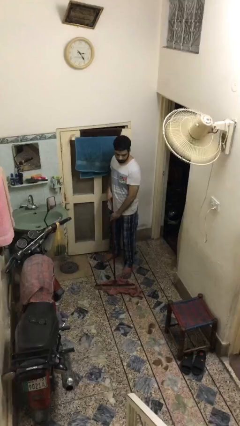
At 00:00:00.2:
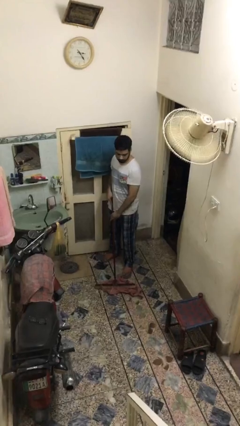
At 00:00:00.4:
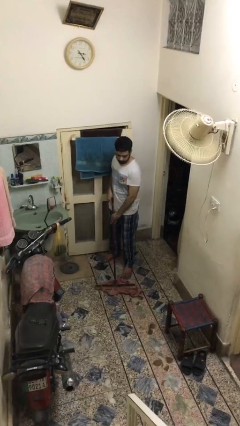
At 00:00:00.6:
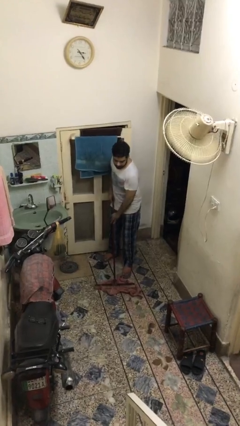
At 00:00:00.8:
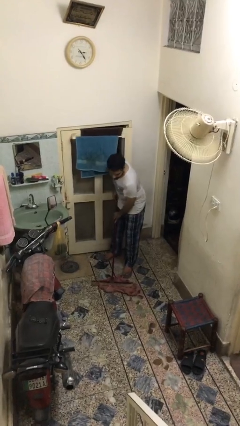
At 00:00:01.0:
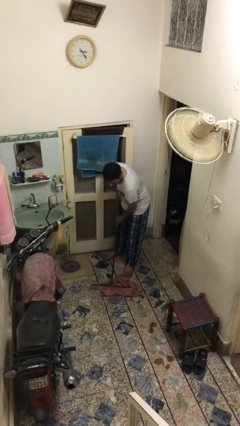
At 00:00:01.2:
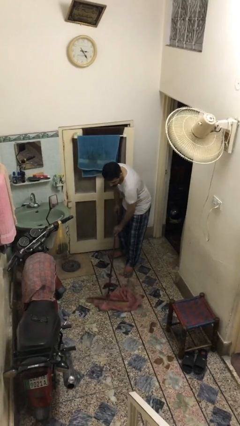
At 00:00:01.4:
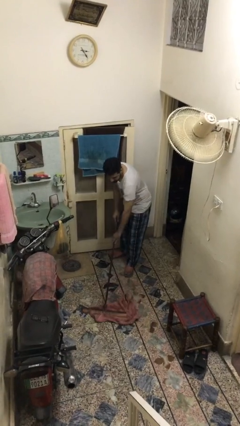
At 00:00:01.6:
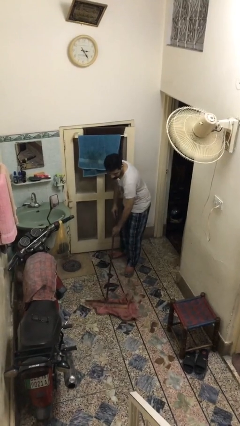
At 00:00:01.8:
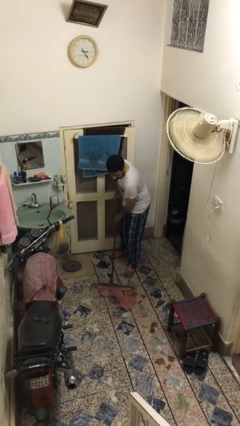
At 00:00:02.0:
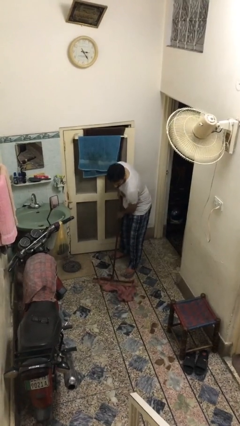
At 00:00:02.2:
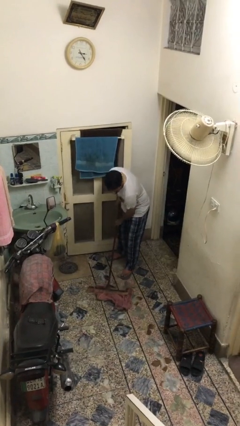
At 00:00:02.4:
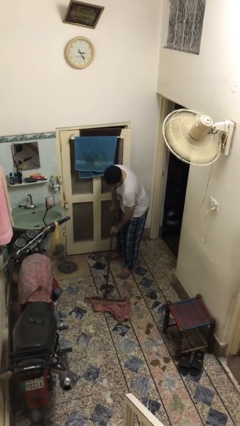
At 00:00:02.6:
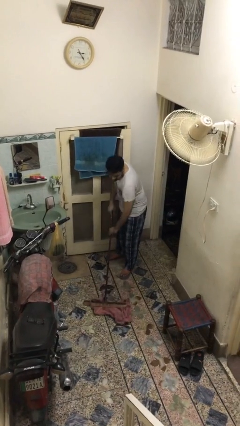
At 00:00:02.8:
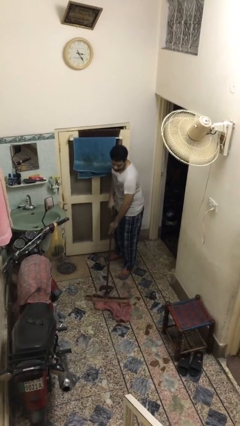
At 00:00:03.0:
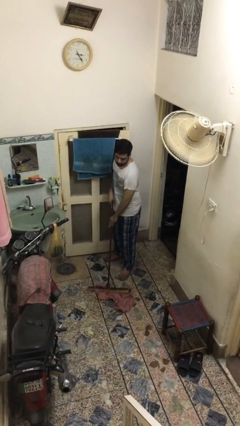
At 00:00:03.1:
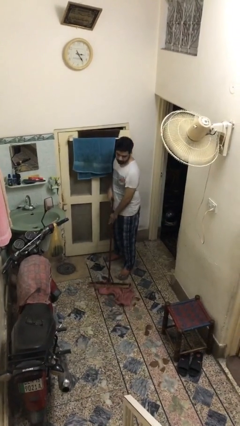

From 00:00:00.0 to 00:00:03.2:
person mops

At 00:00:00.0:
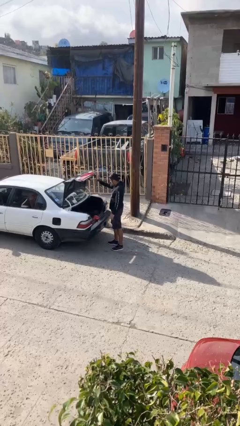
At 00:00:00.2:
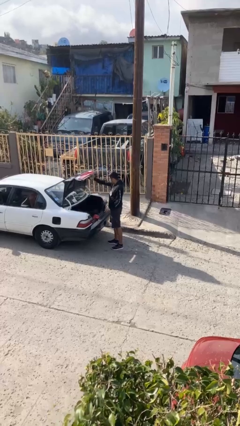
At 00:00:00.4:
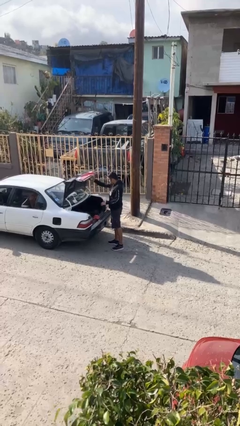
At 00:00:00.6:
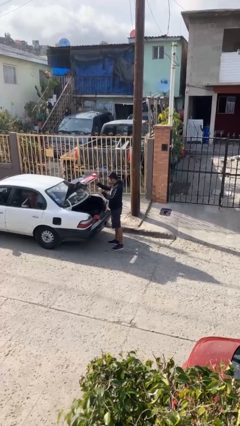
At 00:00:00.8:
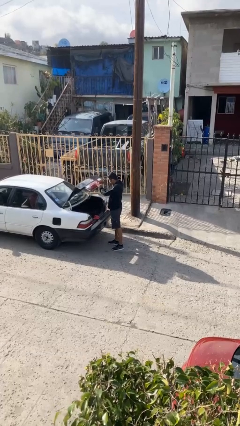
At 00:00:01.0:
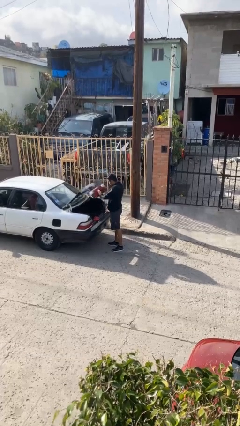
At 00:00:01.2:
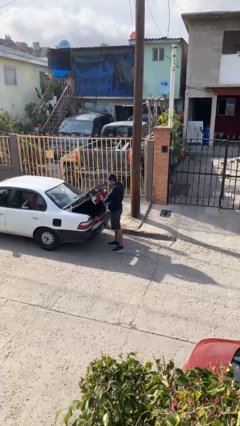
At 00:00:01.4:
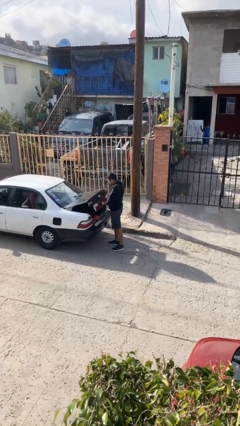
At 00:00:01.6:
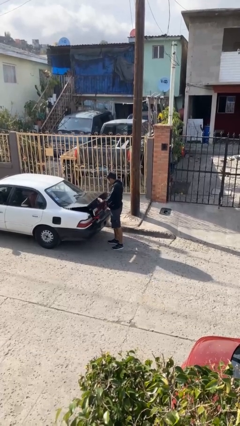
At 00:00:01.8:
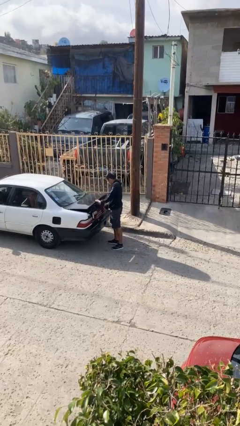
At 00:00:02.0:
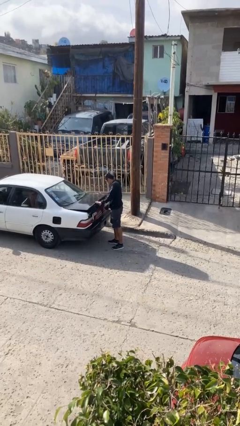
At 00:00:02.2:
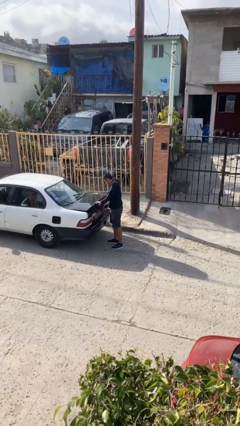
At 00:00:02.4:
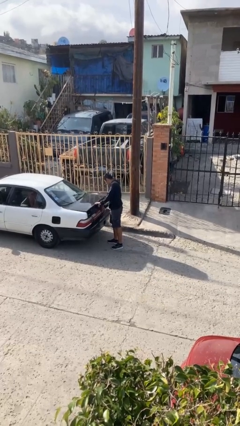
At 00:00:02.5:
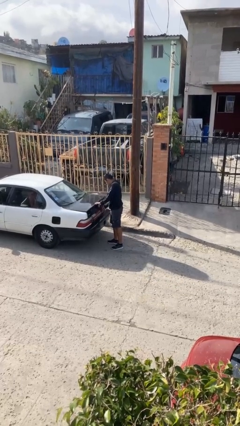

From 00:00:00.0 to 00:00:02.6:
person closes car trunk

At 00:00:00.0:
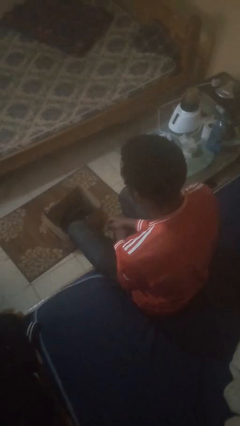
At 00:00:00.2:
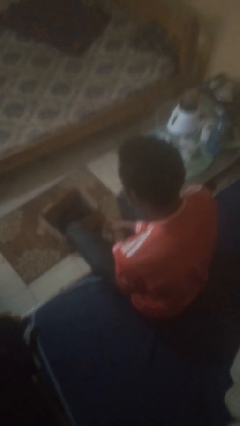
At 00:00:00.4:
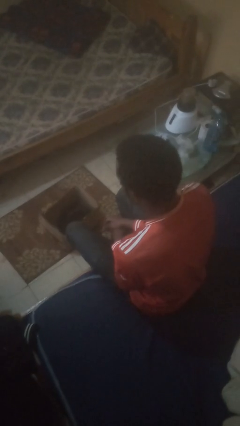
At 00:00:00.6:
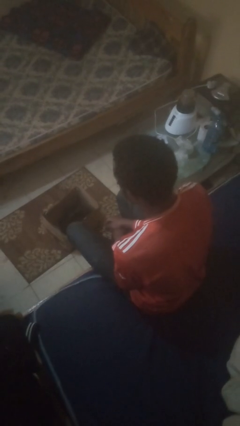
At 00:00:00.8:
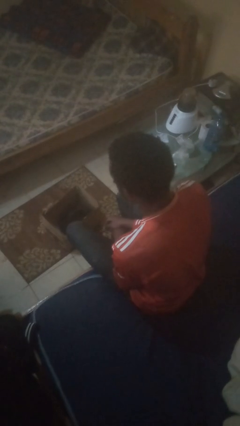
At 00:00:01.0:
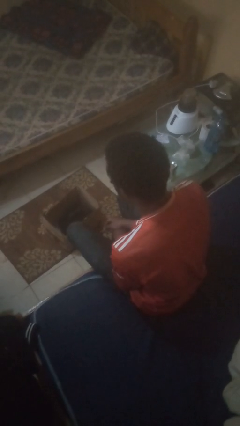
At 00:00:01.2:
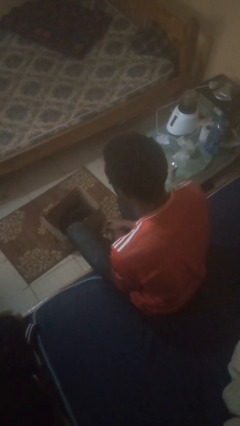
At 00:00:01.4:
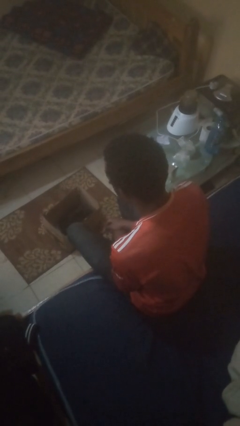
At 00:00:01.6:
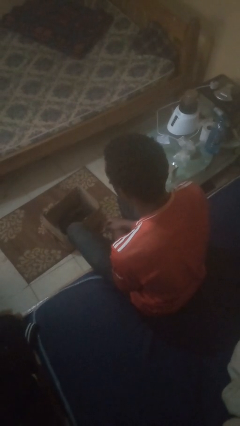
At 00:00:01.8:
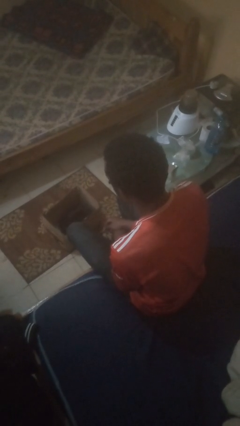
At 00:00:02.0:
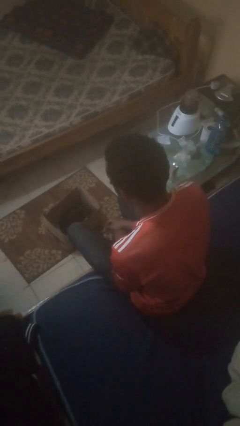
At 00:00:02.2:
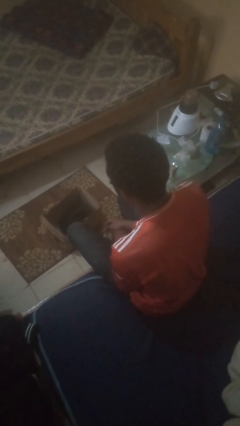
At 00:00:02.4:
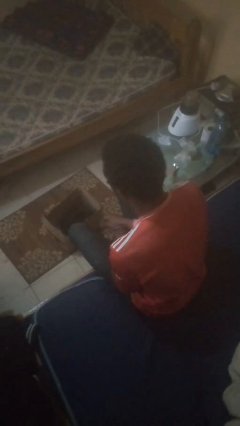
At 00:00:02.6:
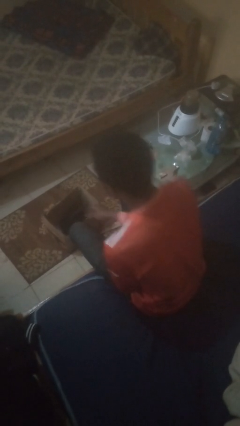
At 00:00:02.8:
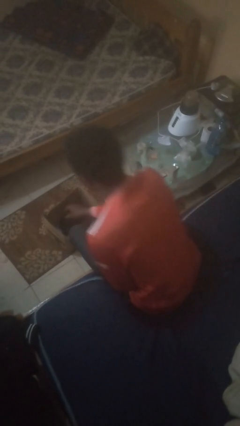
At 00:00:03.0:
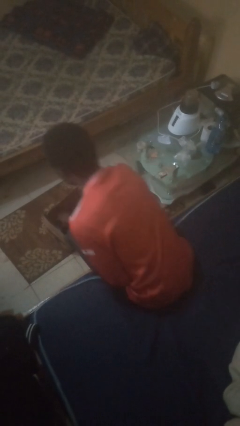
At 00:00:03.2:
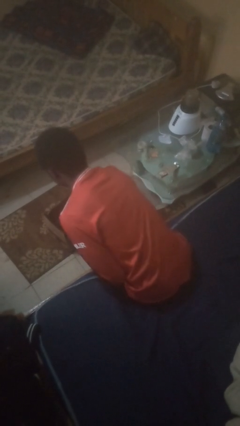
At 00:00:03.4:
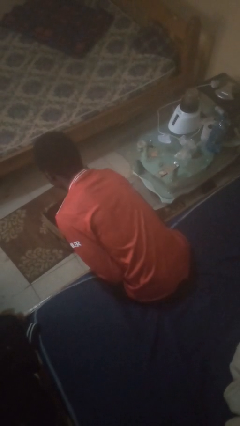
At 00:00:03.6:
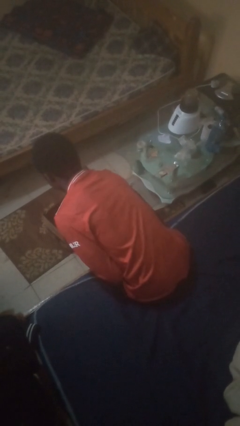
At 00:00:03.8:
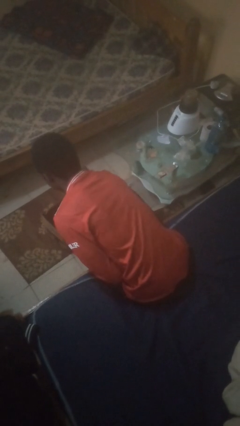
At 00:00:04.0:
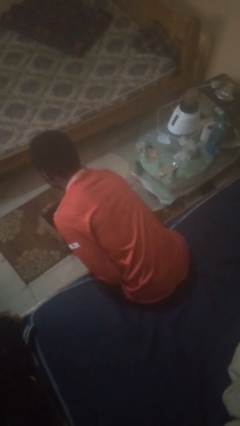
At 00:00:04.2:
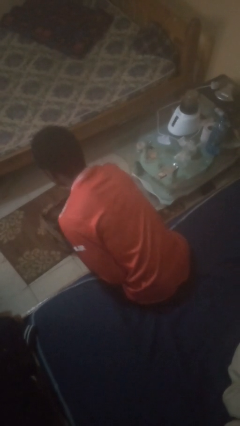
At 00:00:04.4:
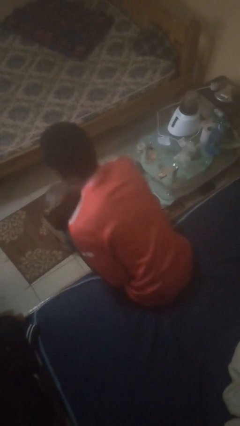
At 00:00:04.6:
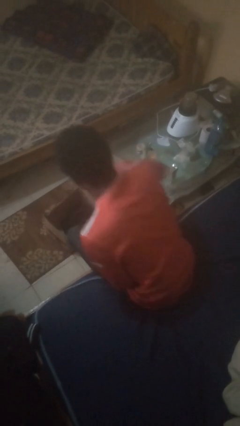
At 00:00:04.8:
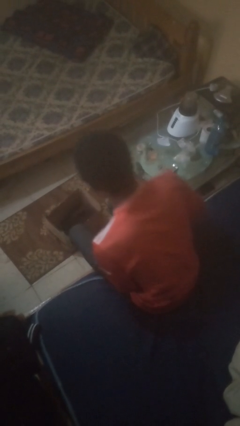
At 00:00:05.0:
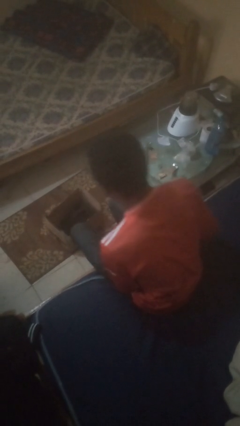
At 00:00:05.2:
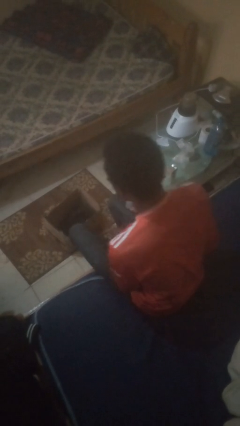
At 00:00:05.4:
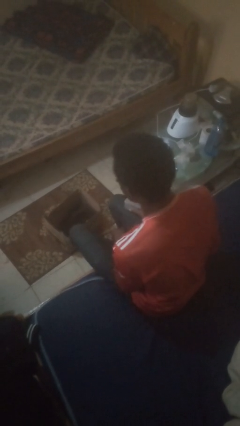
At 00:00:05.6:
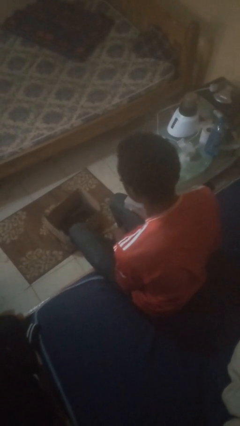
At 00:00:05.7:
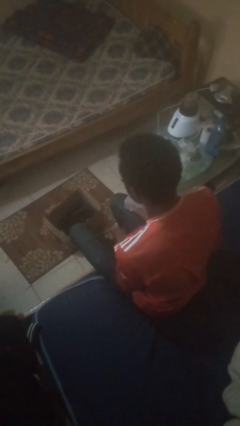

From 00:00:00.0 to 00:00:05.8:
person takes object from box

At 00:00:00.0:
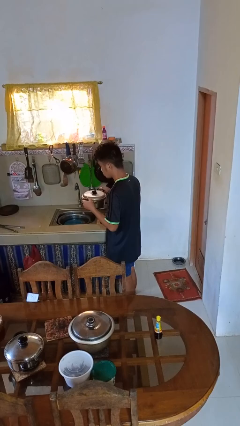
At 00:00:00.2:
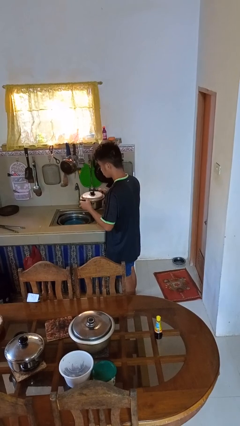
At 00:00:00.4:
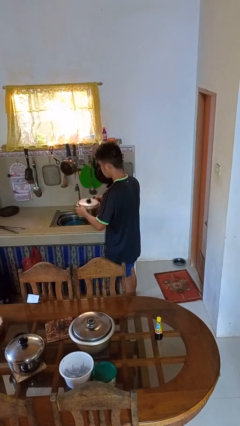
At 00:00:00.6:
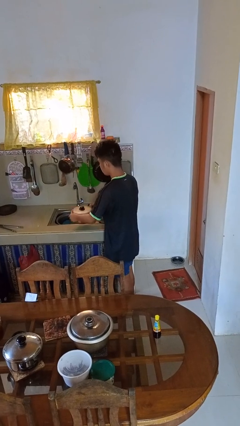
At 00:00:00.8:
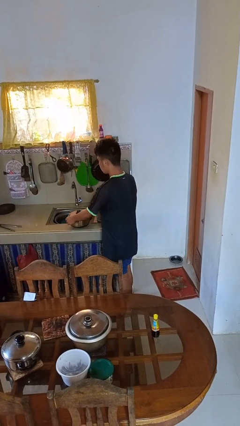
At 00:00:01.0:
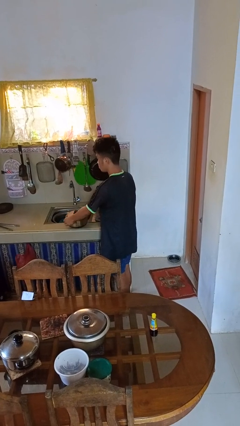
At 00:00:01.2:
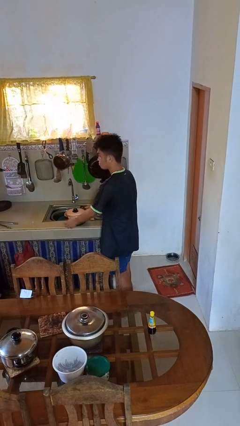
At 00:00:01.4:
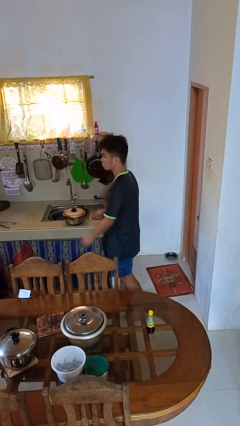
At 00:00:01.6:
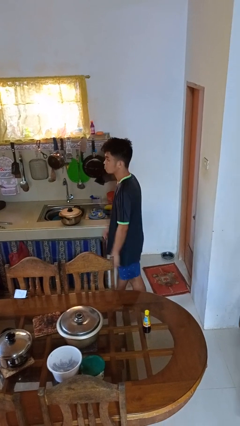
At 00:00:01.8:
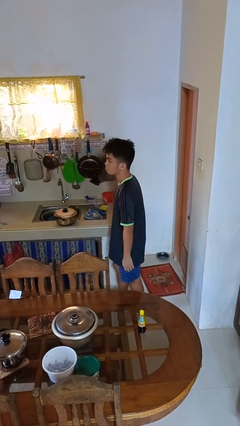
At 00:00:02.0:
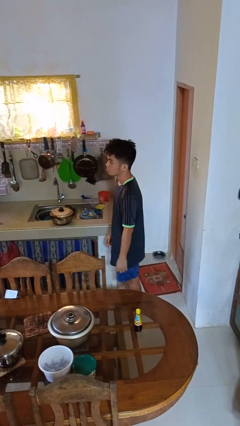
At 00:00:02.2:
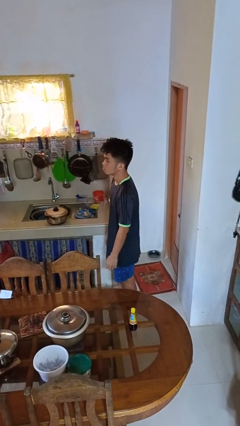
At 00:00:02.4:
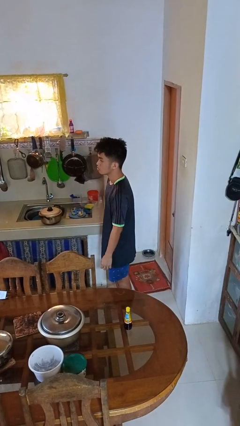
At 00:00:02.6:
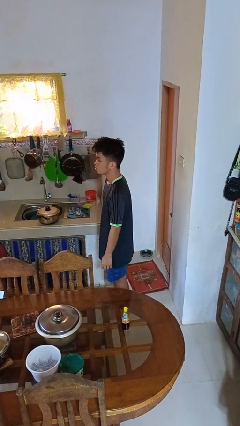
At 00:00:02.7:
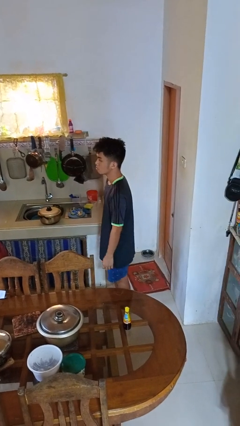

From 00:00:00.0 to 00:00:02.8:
person puts down object on countertop

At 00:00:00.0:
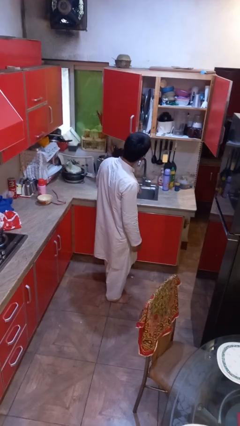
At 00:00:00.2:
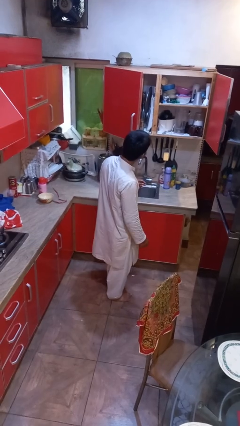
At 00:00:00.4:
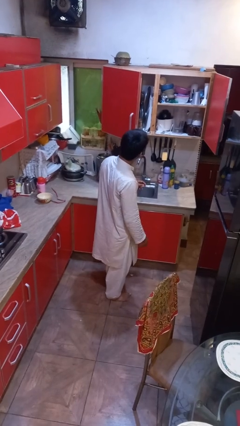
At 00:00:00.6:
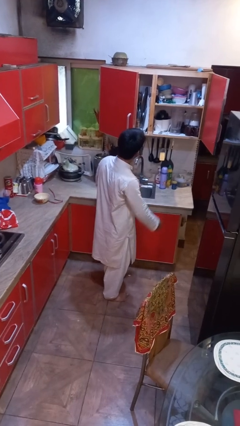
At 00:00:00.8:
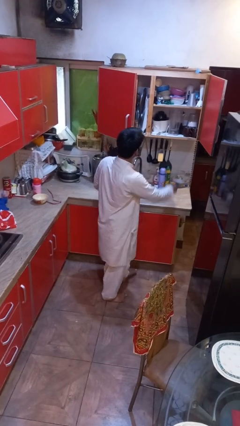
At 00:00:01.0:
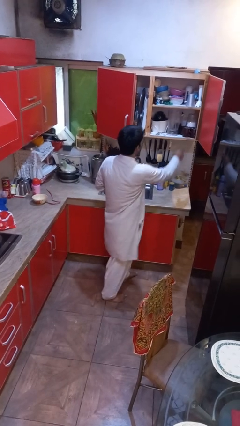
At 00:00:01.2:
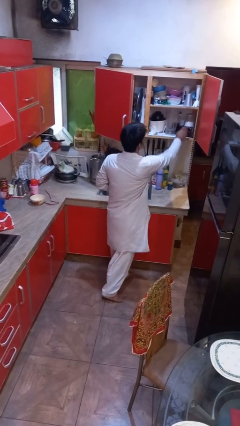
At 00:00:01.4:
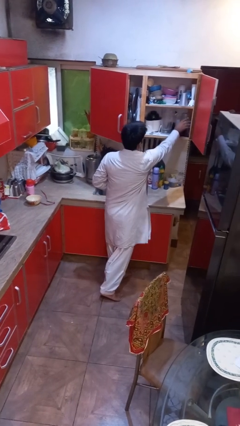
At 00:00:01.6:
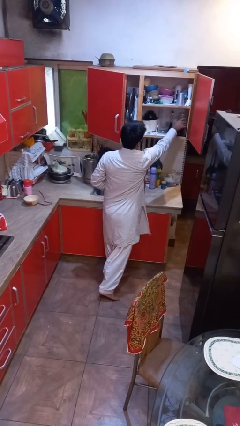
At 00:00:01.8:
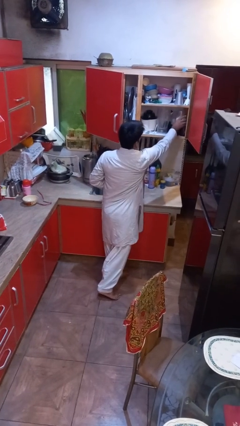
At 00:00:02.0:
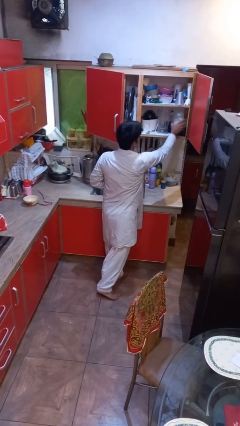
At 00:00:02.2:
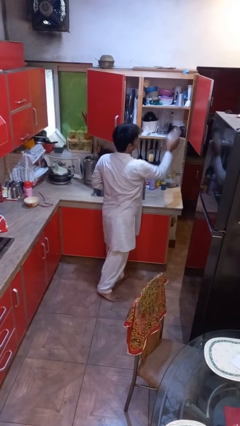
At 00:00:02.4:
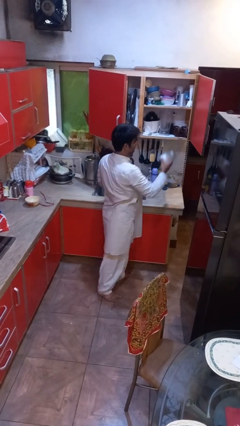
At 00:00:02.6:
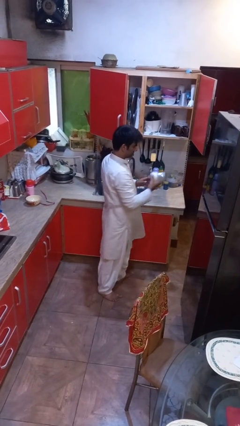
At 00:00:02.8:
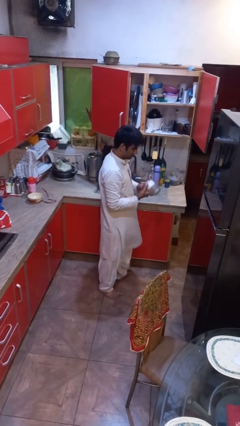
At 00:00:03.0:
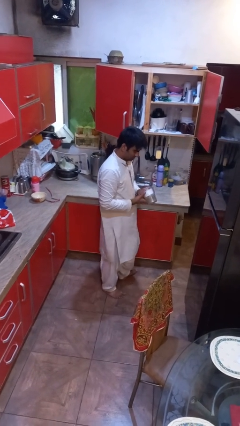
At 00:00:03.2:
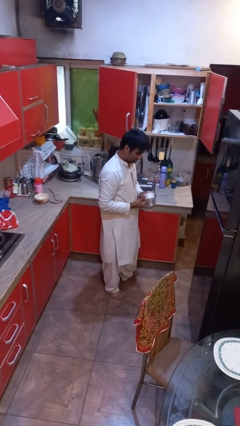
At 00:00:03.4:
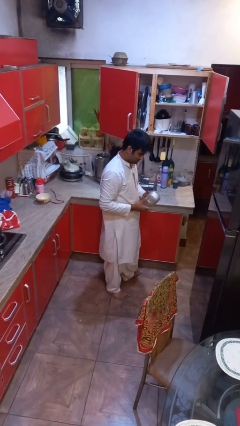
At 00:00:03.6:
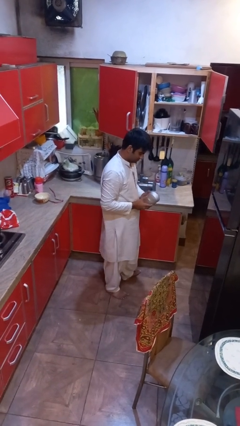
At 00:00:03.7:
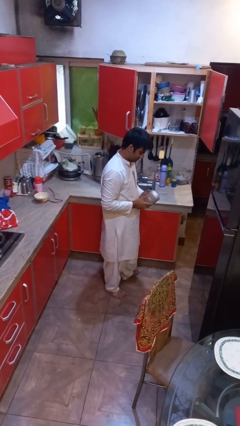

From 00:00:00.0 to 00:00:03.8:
person picks up object from cabinet
